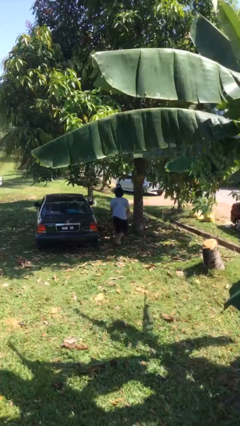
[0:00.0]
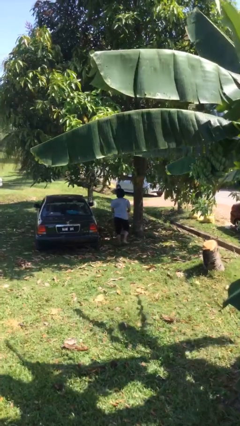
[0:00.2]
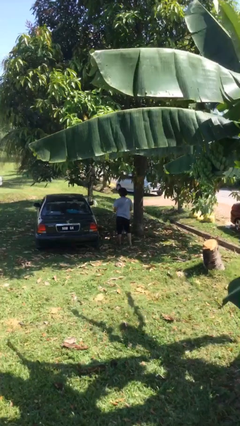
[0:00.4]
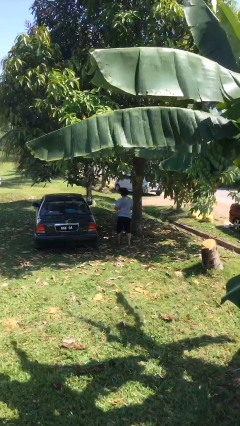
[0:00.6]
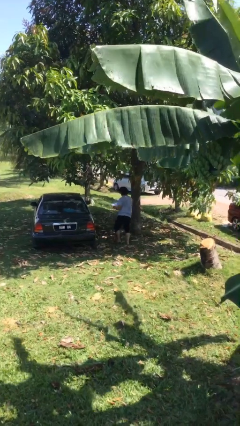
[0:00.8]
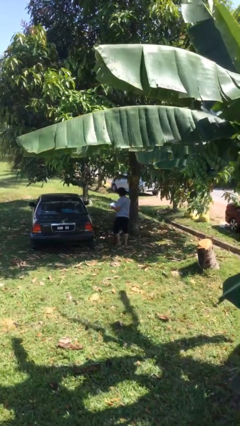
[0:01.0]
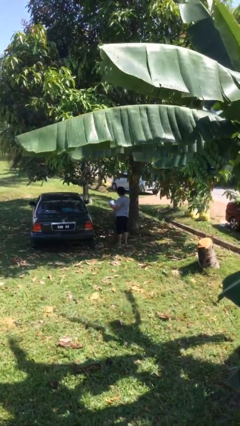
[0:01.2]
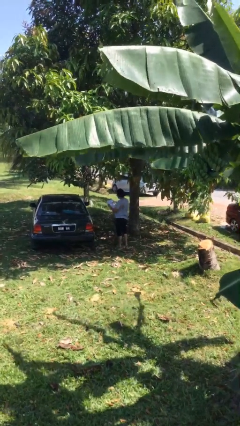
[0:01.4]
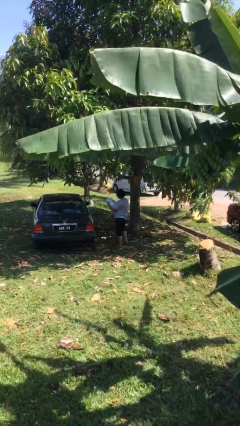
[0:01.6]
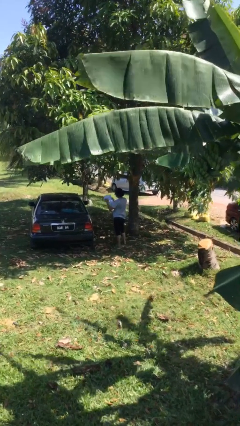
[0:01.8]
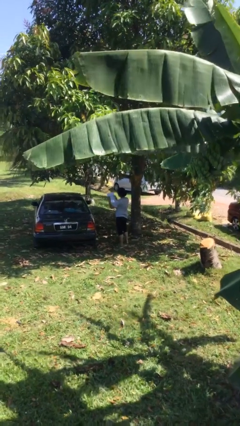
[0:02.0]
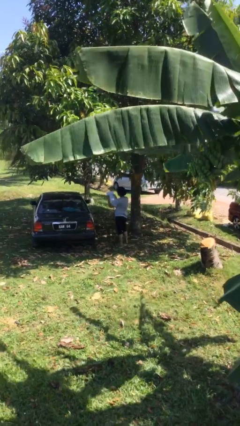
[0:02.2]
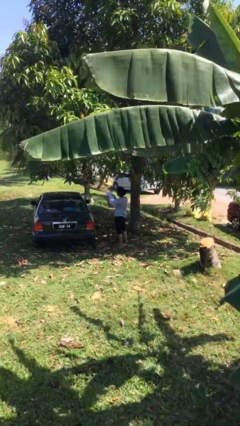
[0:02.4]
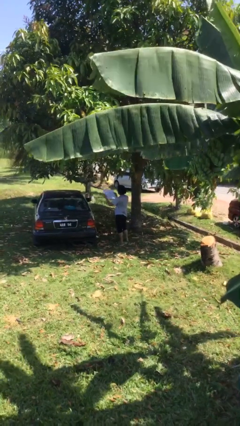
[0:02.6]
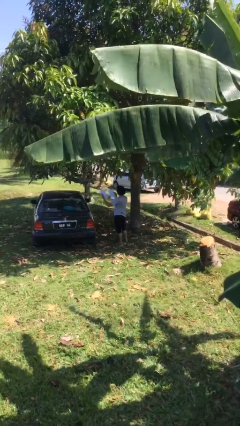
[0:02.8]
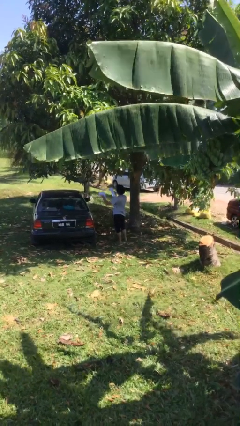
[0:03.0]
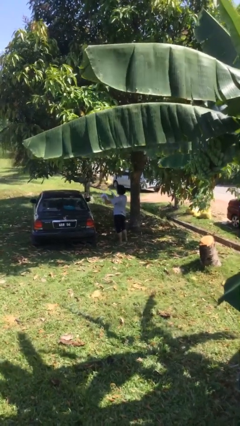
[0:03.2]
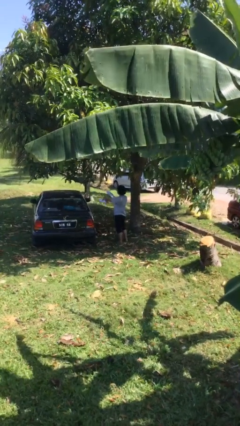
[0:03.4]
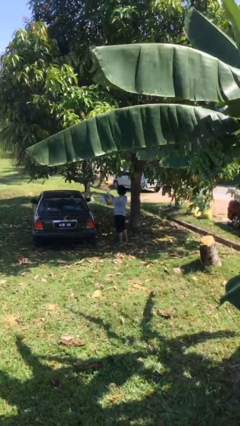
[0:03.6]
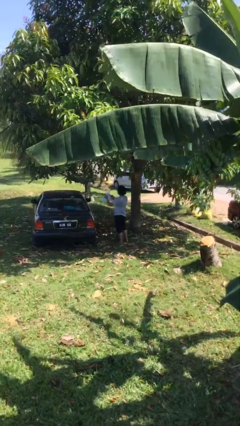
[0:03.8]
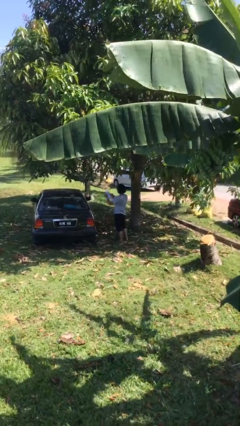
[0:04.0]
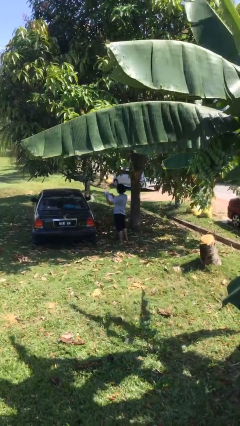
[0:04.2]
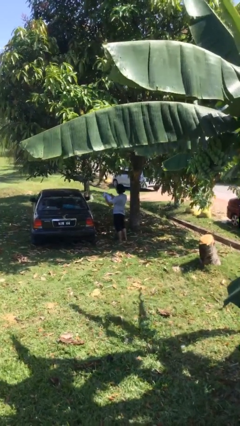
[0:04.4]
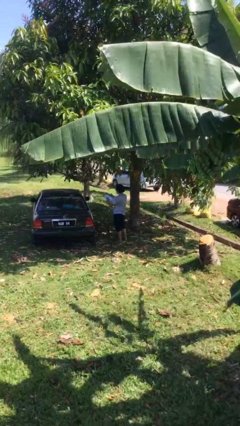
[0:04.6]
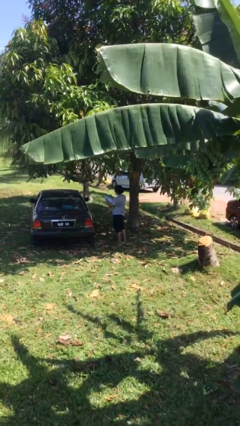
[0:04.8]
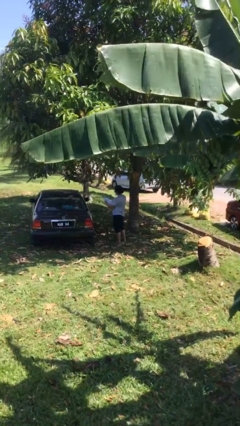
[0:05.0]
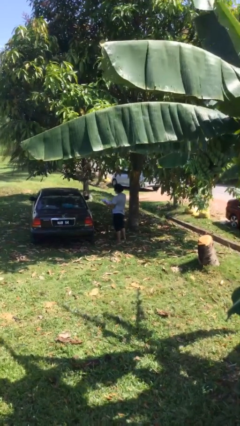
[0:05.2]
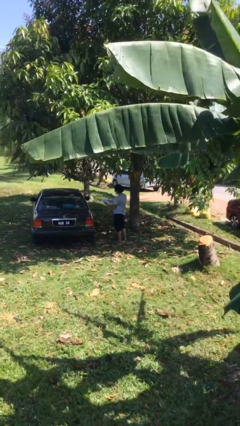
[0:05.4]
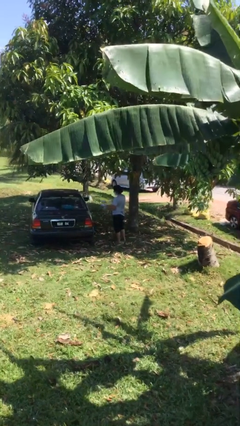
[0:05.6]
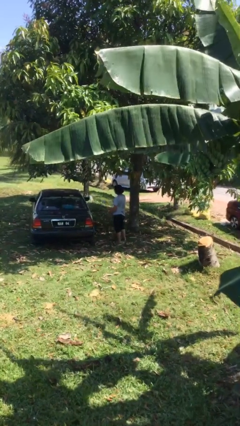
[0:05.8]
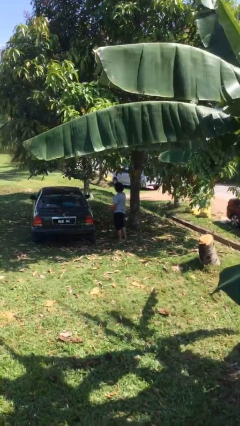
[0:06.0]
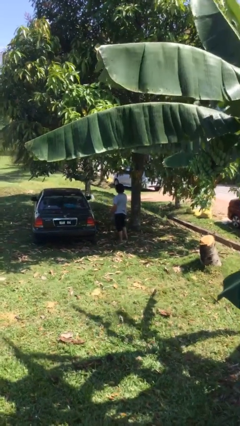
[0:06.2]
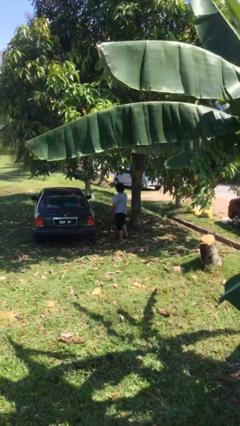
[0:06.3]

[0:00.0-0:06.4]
person reads document

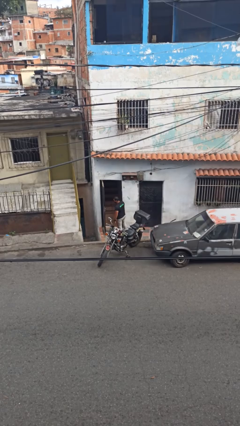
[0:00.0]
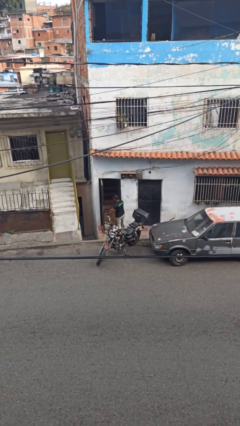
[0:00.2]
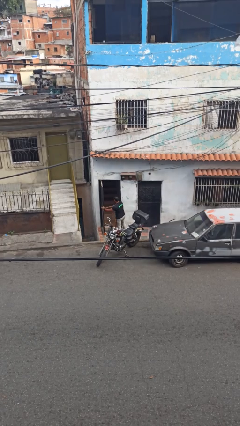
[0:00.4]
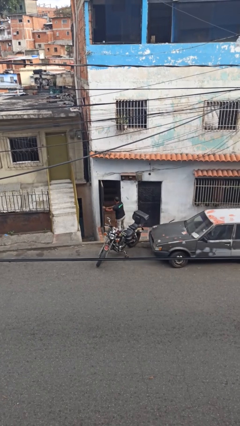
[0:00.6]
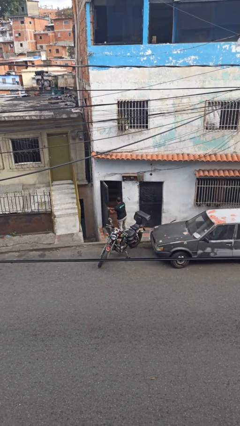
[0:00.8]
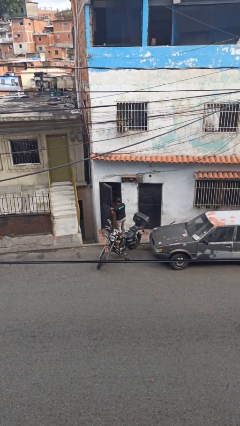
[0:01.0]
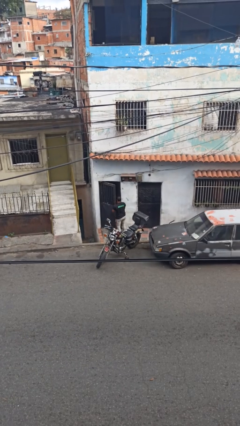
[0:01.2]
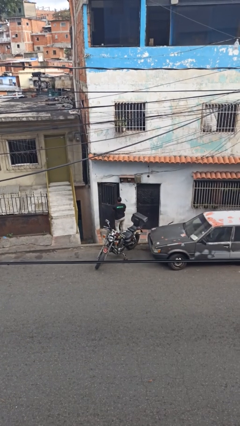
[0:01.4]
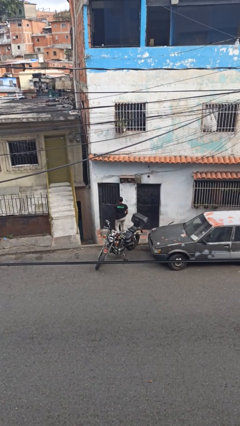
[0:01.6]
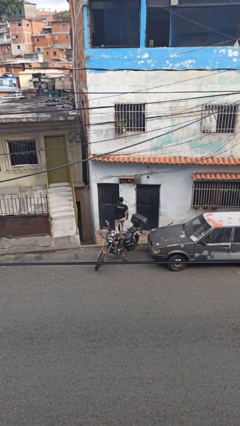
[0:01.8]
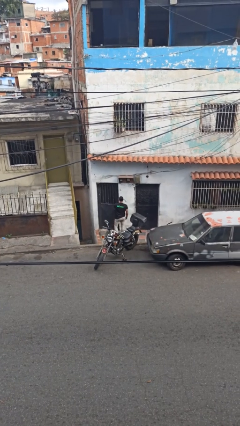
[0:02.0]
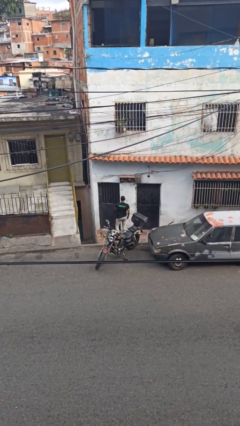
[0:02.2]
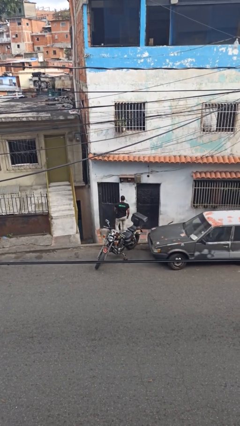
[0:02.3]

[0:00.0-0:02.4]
person closes facility door

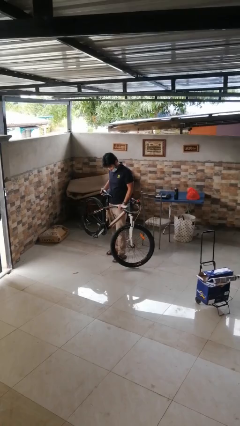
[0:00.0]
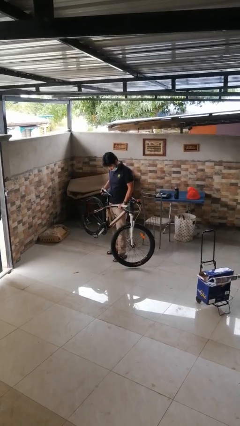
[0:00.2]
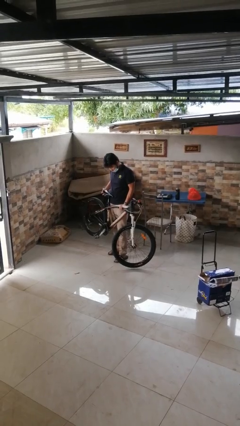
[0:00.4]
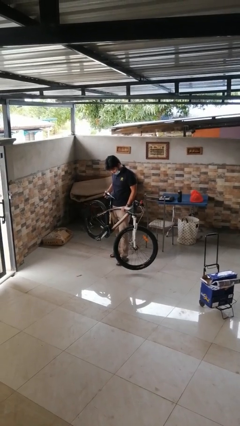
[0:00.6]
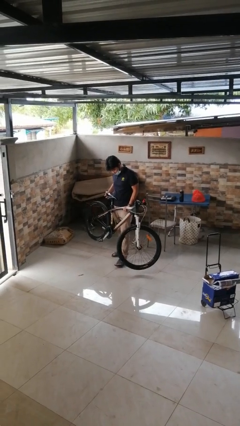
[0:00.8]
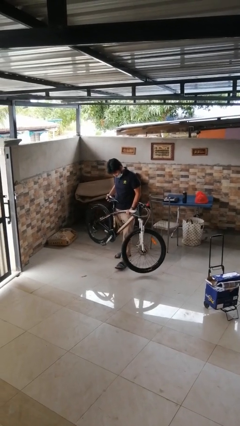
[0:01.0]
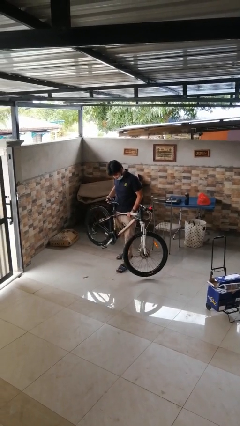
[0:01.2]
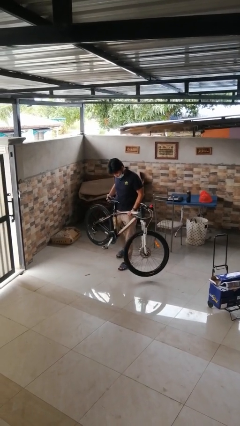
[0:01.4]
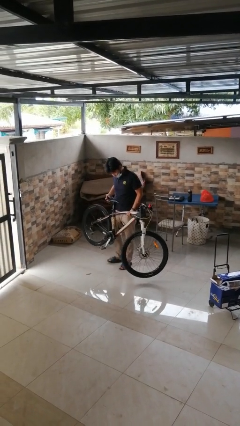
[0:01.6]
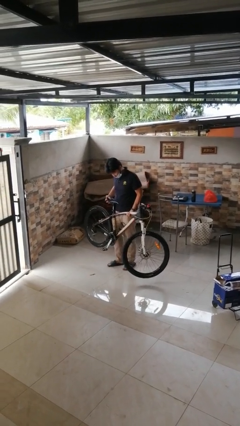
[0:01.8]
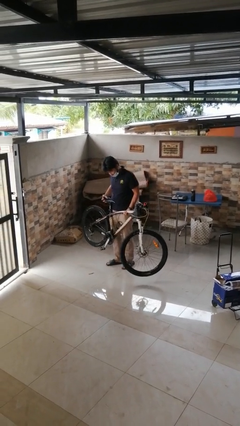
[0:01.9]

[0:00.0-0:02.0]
person carries bicycle

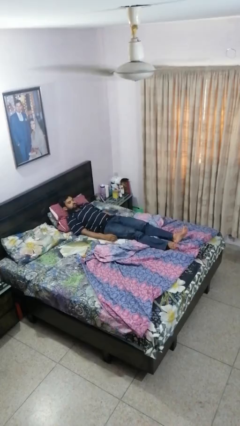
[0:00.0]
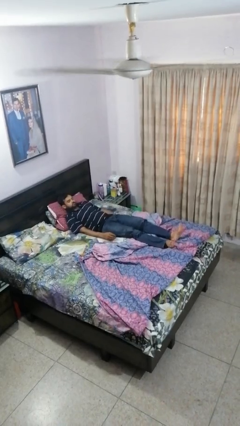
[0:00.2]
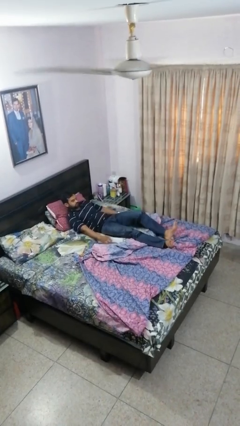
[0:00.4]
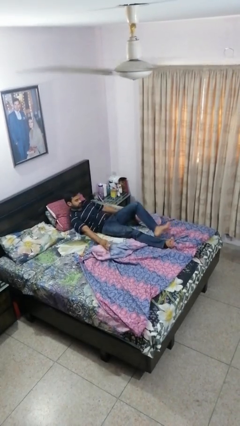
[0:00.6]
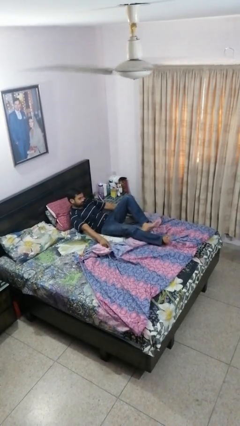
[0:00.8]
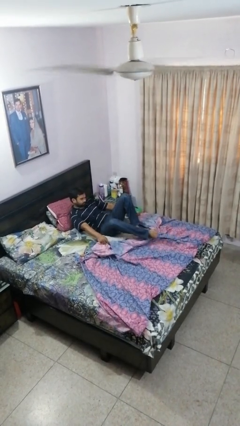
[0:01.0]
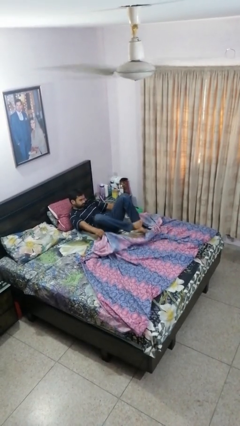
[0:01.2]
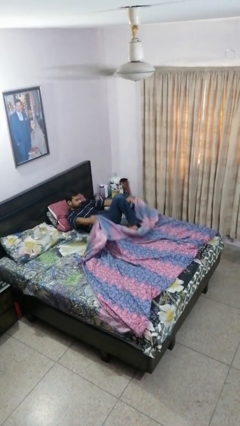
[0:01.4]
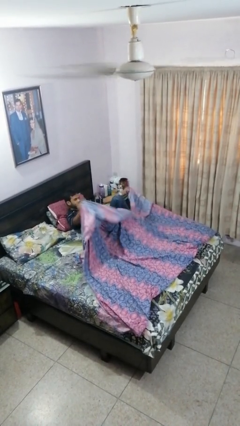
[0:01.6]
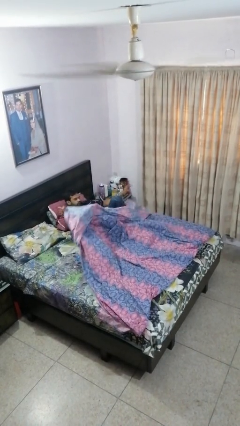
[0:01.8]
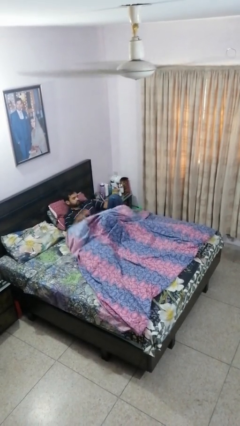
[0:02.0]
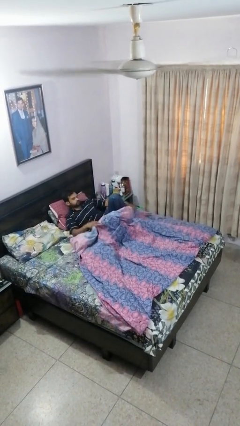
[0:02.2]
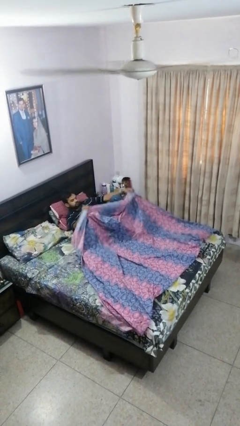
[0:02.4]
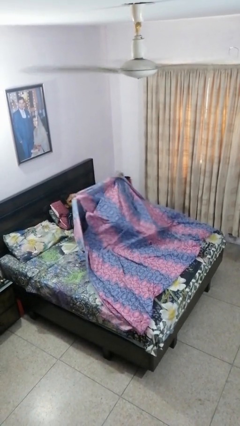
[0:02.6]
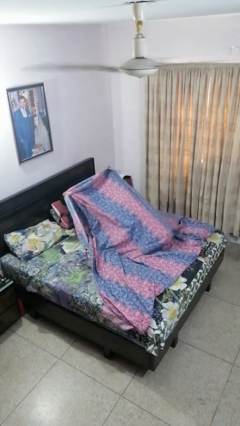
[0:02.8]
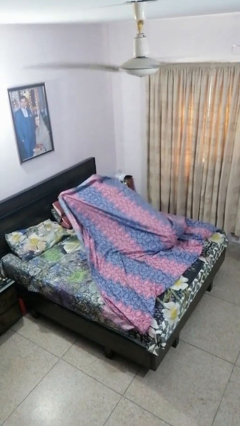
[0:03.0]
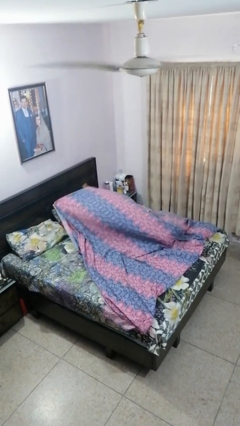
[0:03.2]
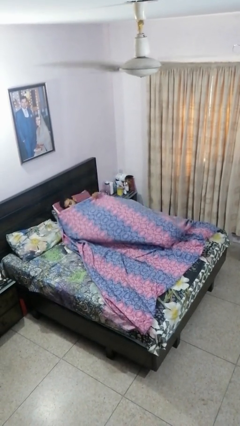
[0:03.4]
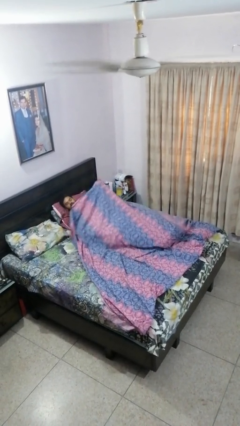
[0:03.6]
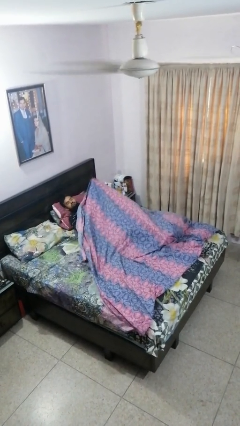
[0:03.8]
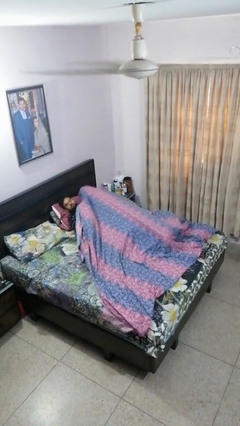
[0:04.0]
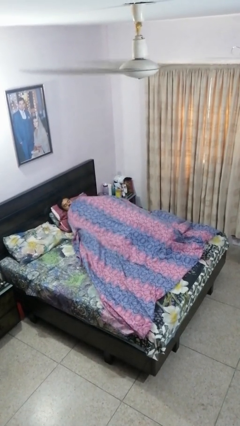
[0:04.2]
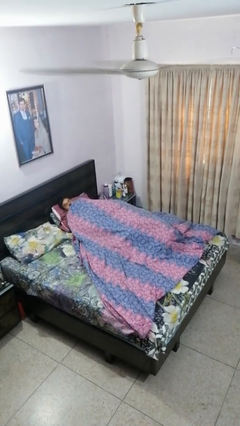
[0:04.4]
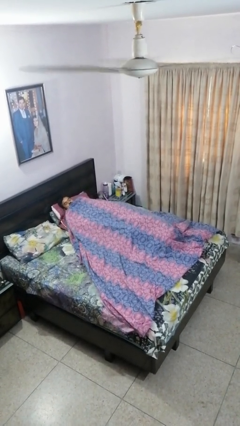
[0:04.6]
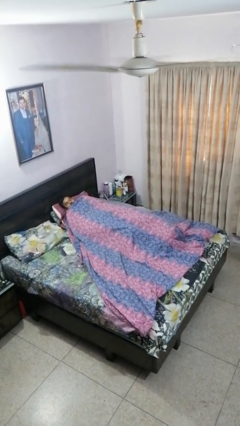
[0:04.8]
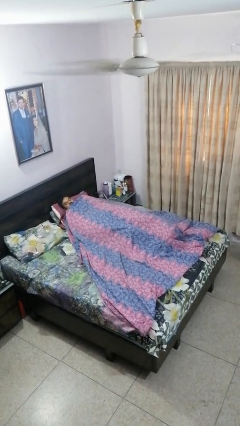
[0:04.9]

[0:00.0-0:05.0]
person covers with bedsheets

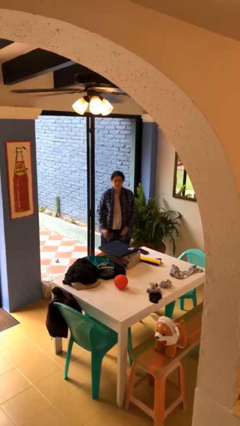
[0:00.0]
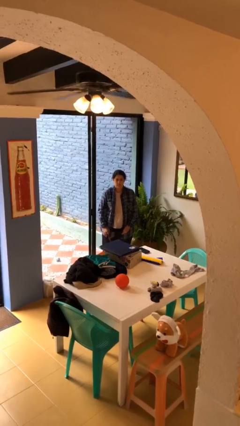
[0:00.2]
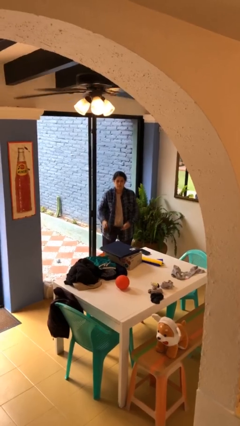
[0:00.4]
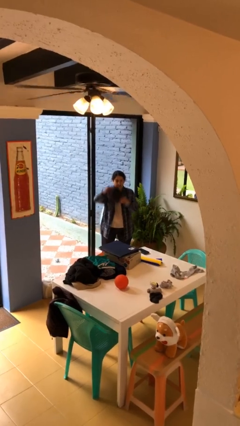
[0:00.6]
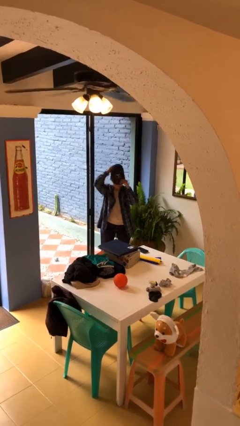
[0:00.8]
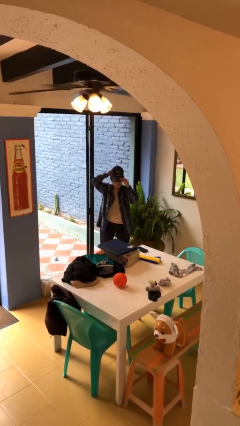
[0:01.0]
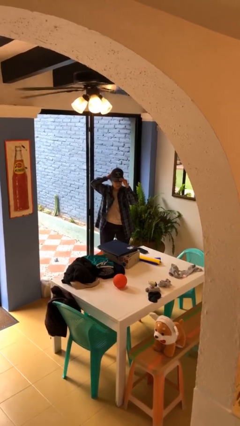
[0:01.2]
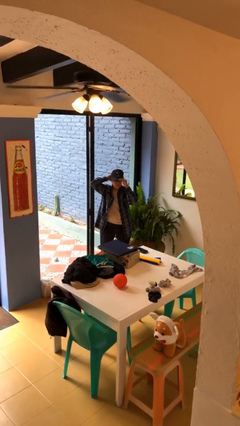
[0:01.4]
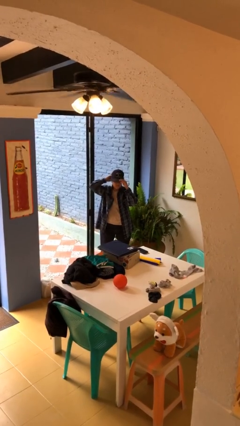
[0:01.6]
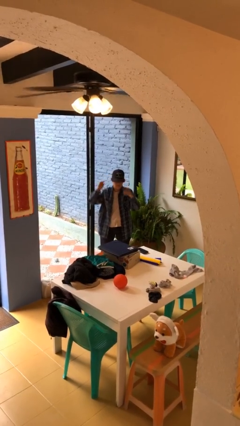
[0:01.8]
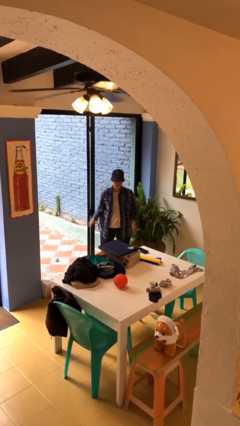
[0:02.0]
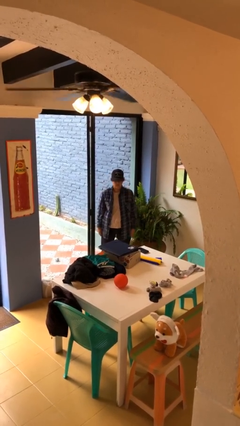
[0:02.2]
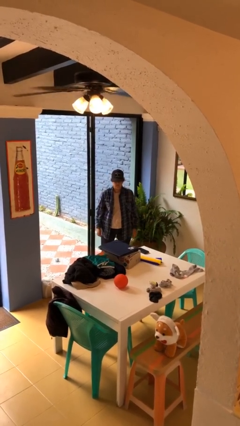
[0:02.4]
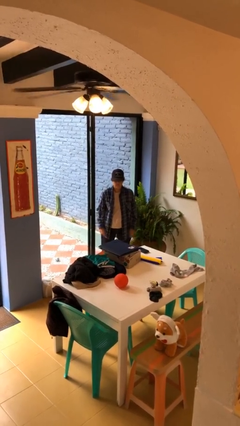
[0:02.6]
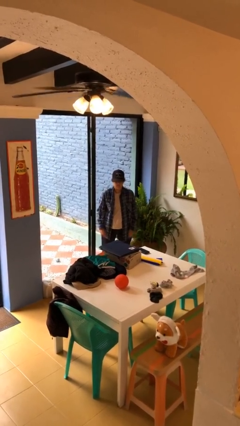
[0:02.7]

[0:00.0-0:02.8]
person puts on hat
